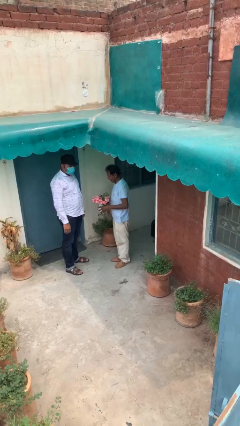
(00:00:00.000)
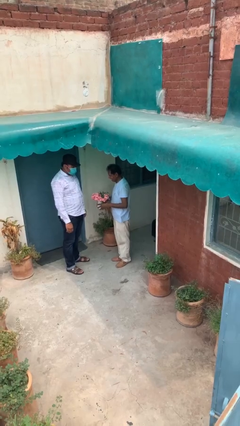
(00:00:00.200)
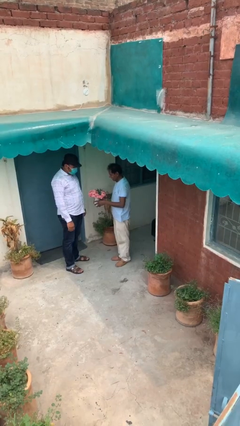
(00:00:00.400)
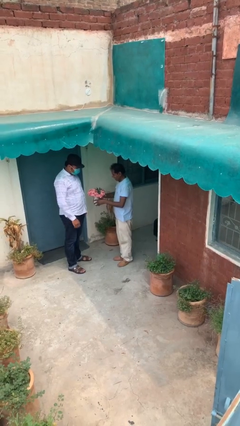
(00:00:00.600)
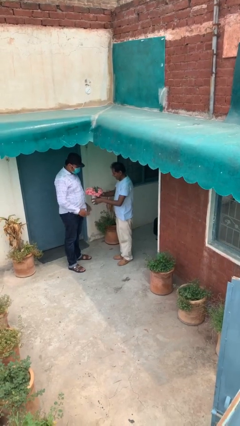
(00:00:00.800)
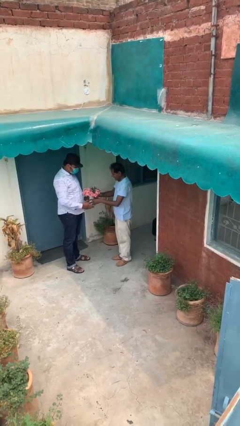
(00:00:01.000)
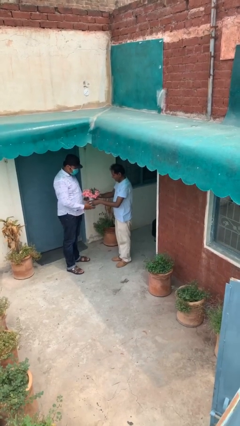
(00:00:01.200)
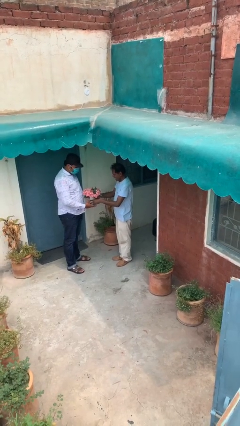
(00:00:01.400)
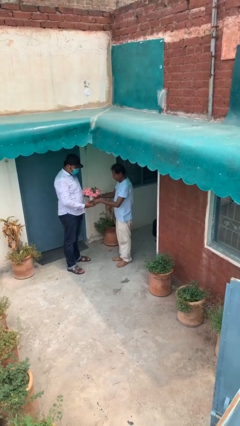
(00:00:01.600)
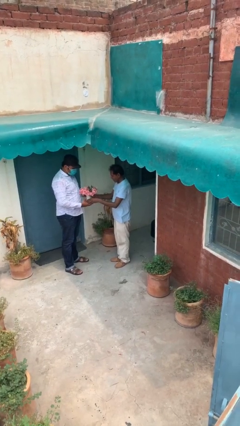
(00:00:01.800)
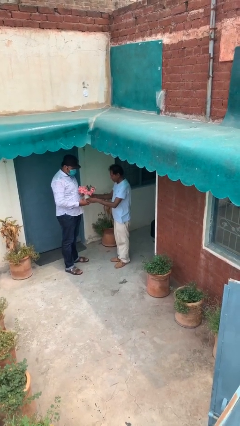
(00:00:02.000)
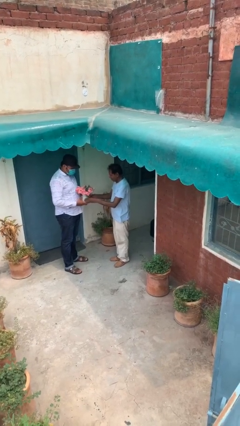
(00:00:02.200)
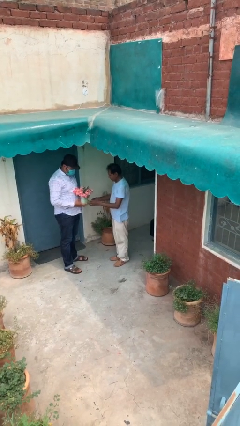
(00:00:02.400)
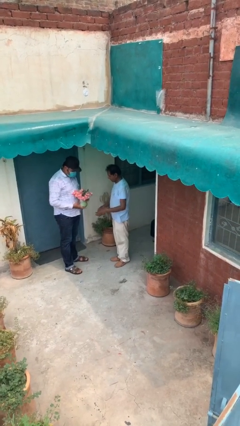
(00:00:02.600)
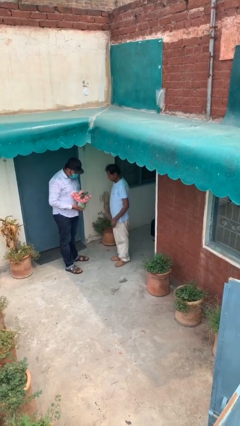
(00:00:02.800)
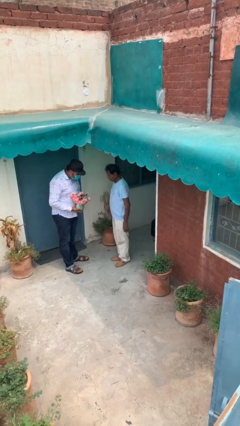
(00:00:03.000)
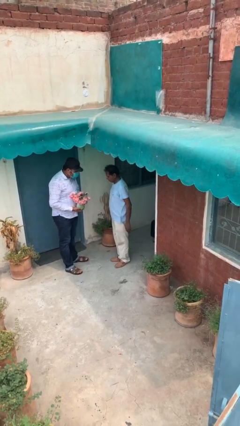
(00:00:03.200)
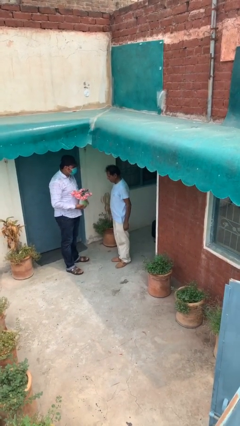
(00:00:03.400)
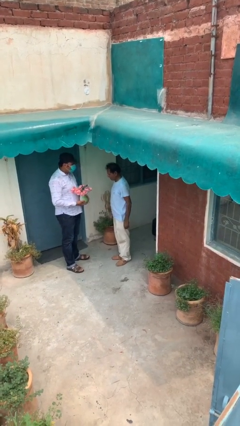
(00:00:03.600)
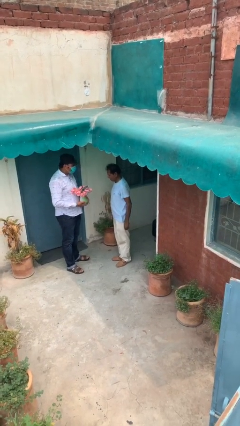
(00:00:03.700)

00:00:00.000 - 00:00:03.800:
person transfers object to person

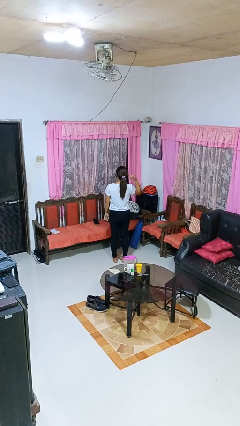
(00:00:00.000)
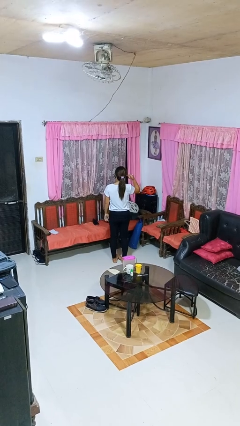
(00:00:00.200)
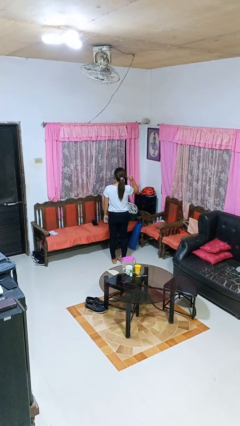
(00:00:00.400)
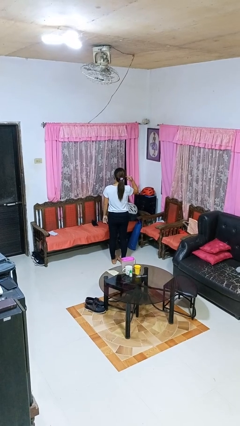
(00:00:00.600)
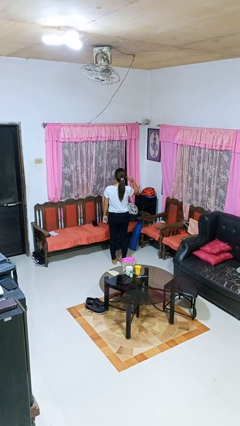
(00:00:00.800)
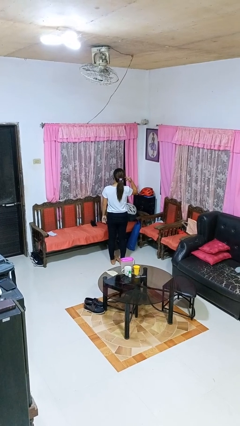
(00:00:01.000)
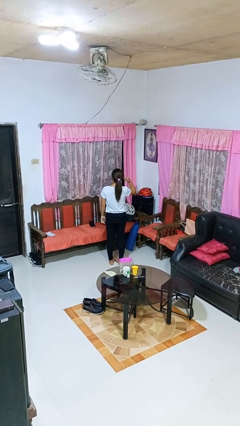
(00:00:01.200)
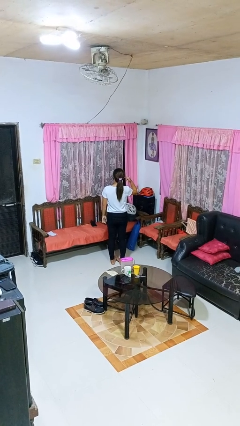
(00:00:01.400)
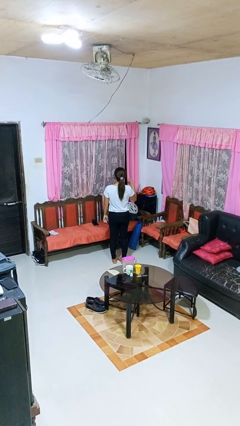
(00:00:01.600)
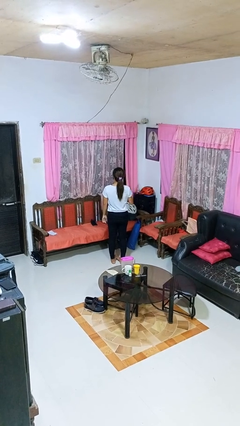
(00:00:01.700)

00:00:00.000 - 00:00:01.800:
person gestures listen closely

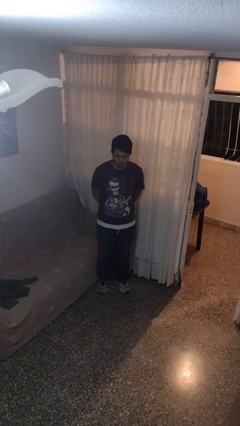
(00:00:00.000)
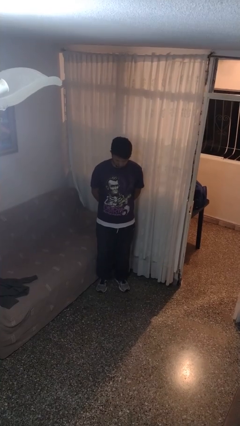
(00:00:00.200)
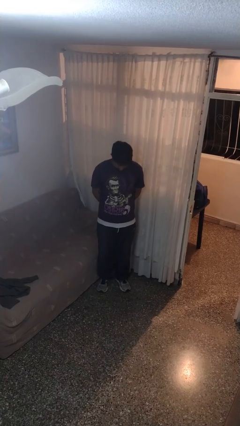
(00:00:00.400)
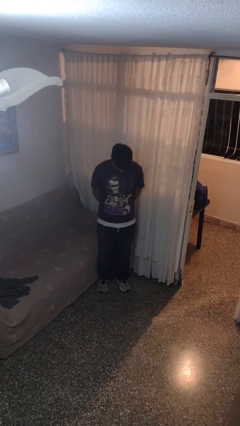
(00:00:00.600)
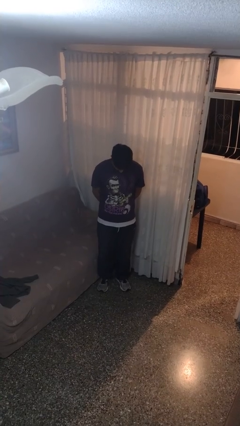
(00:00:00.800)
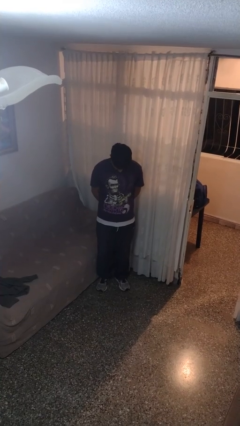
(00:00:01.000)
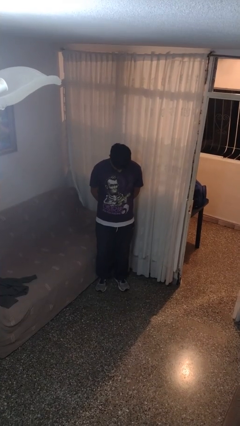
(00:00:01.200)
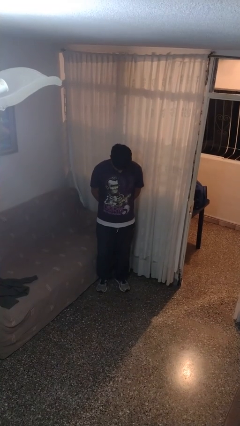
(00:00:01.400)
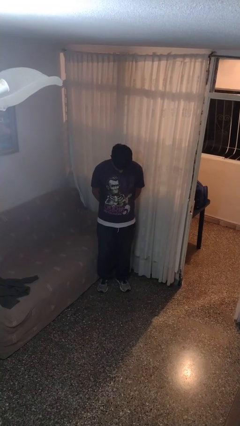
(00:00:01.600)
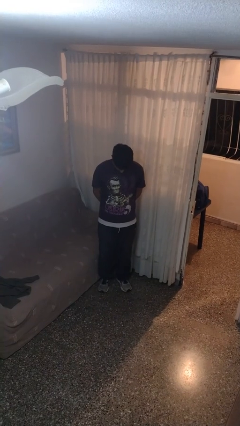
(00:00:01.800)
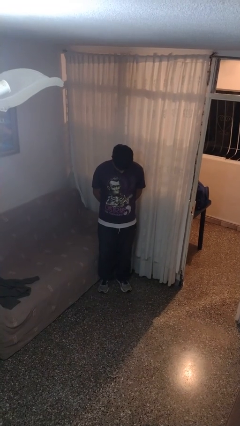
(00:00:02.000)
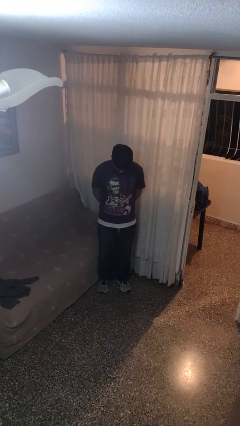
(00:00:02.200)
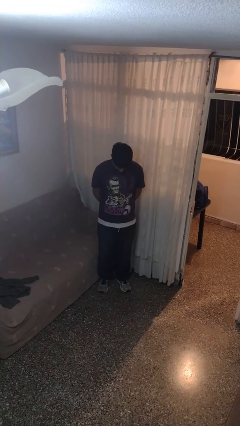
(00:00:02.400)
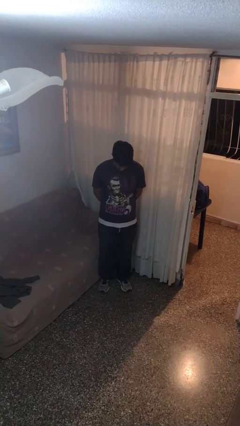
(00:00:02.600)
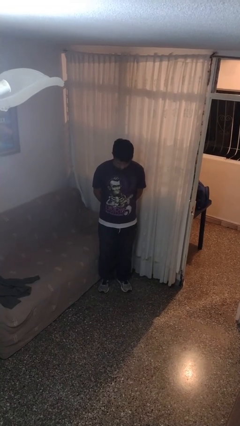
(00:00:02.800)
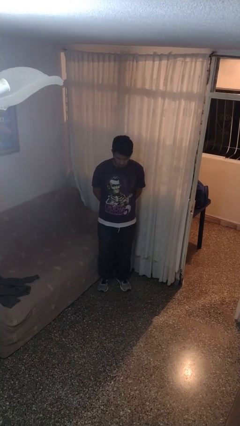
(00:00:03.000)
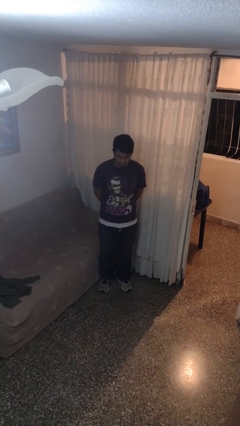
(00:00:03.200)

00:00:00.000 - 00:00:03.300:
person prays

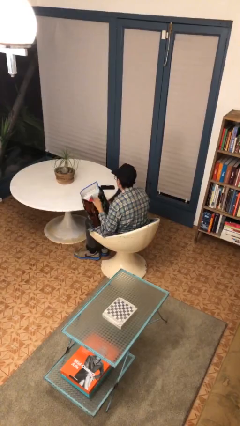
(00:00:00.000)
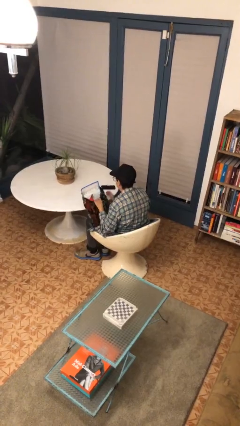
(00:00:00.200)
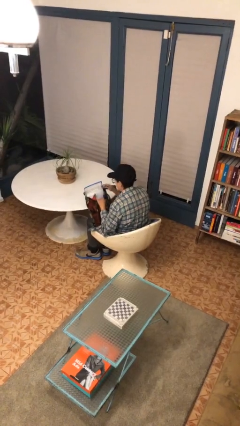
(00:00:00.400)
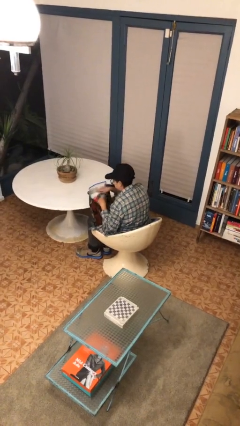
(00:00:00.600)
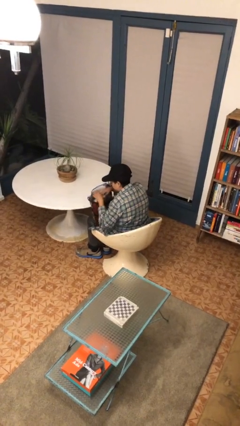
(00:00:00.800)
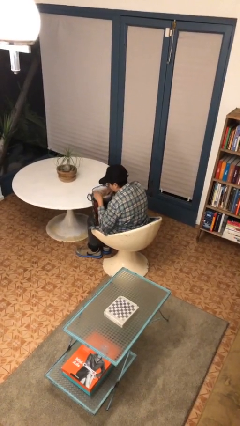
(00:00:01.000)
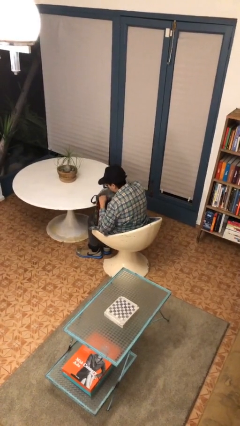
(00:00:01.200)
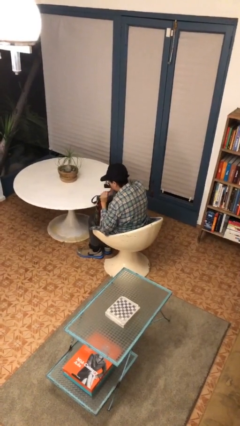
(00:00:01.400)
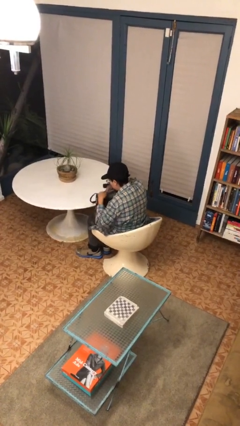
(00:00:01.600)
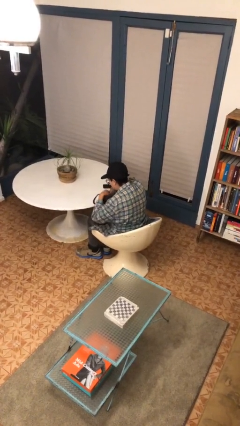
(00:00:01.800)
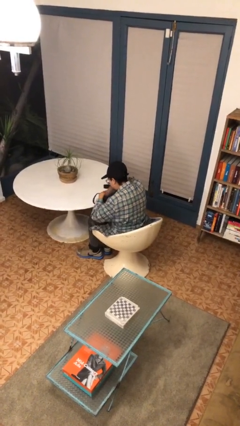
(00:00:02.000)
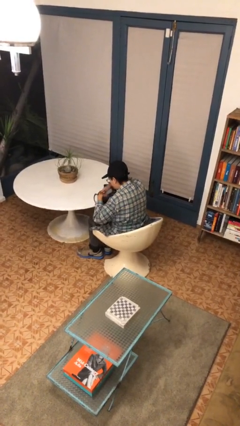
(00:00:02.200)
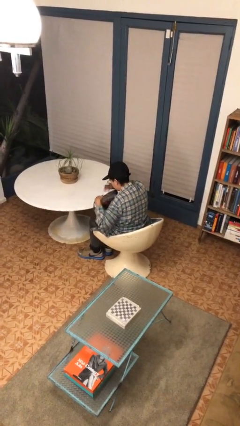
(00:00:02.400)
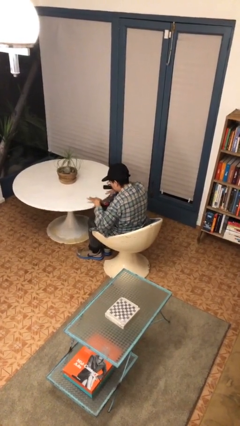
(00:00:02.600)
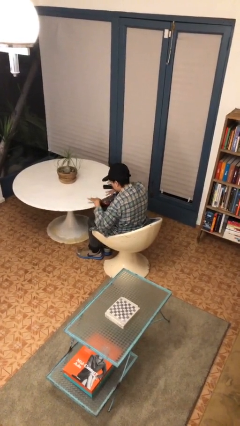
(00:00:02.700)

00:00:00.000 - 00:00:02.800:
person searches in bag

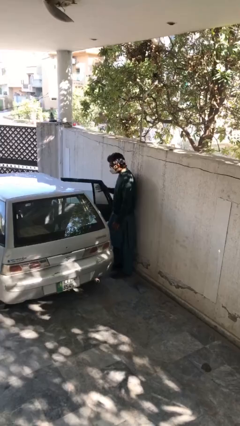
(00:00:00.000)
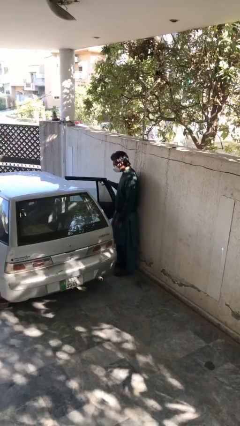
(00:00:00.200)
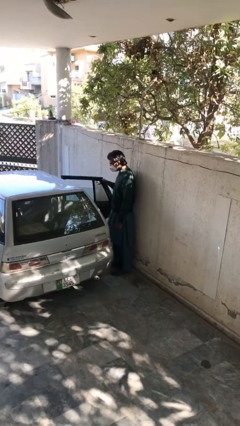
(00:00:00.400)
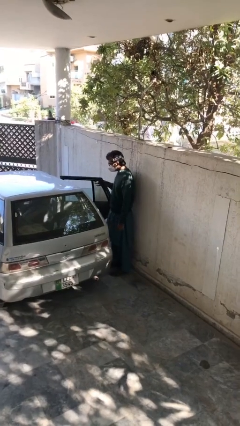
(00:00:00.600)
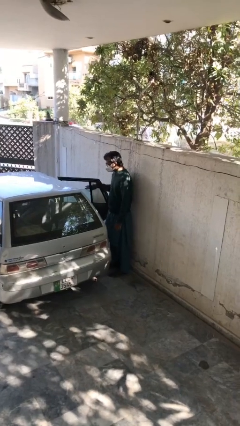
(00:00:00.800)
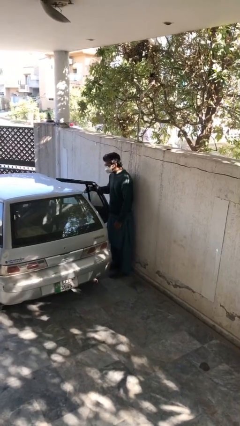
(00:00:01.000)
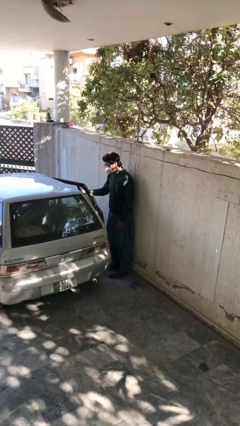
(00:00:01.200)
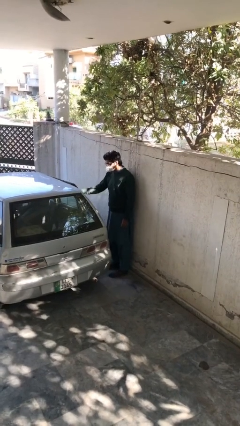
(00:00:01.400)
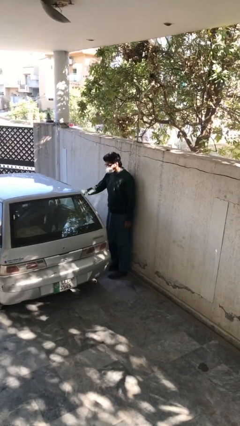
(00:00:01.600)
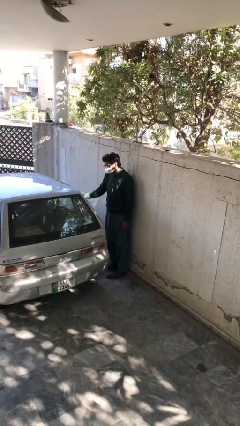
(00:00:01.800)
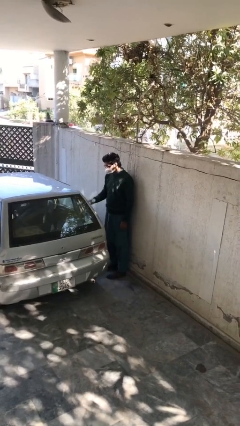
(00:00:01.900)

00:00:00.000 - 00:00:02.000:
person closes car door

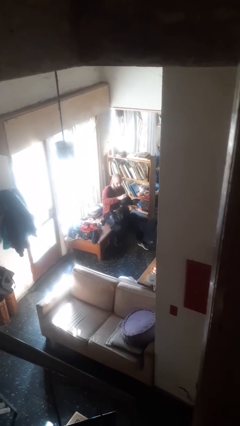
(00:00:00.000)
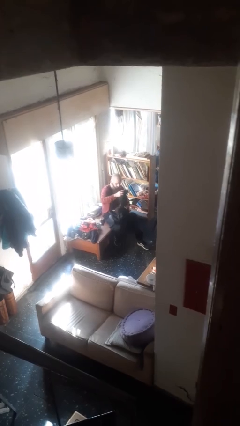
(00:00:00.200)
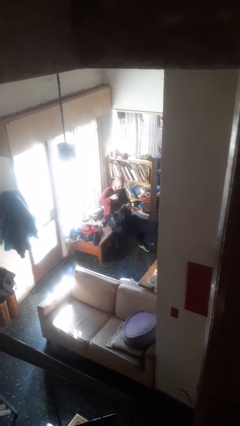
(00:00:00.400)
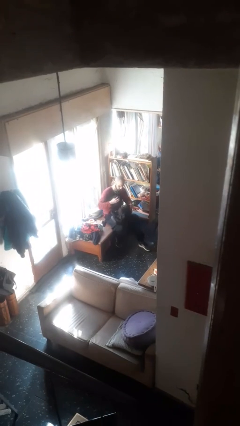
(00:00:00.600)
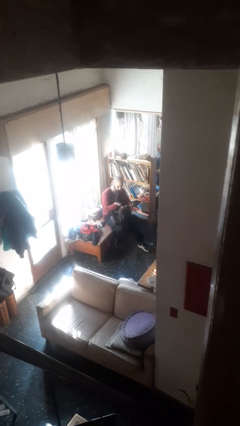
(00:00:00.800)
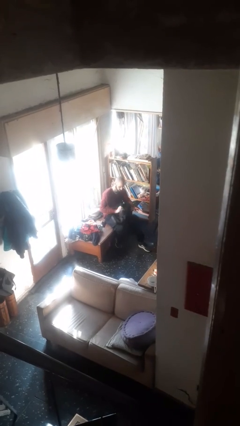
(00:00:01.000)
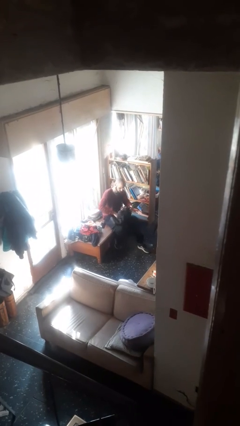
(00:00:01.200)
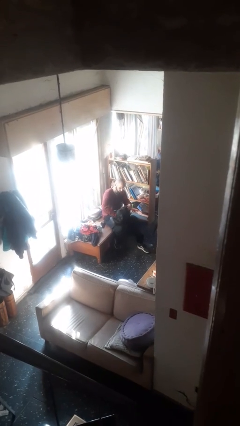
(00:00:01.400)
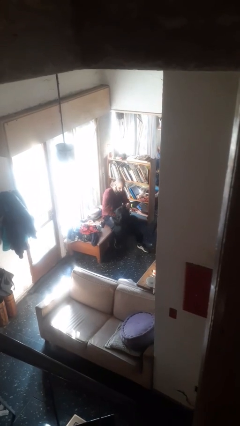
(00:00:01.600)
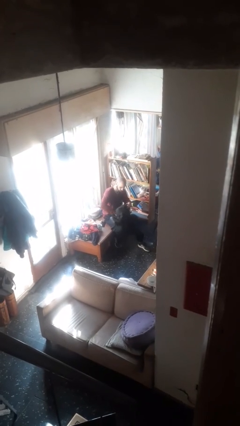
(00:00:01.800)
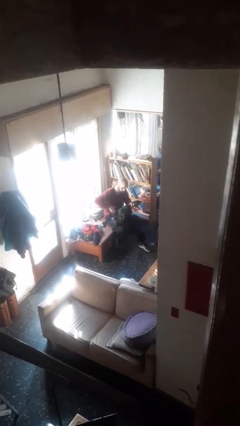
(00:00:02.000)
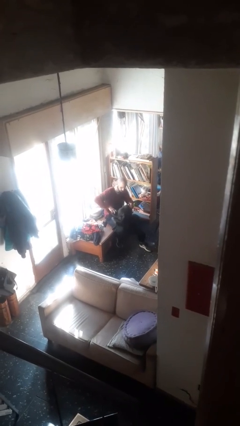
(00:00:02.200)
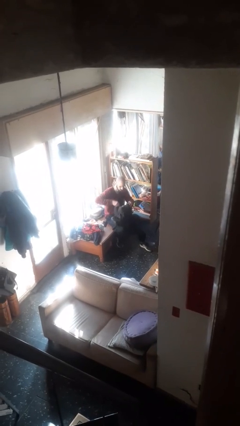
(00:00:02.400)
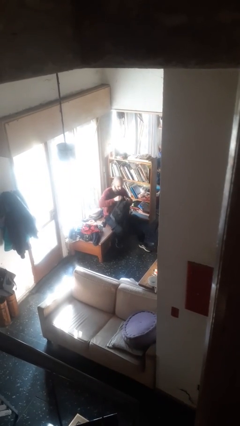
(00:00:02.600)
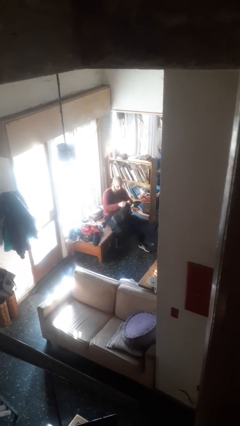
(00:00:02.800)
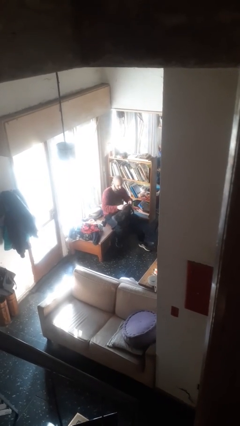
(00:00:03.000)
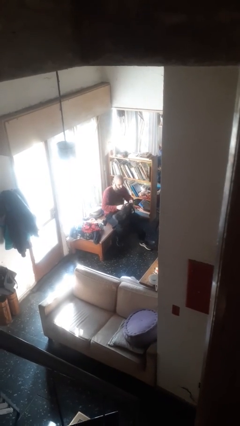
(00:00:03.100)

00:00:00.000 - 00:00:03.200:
person puts object into backpack

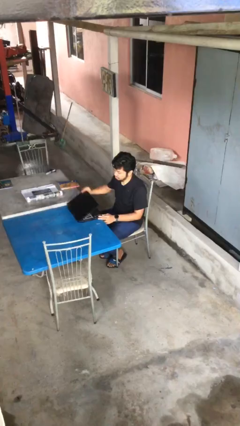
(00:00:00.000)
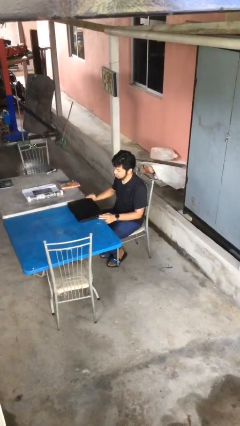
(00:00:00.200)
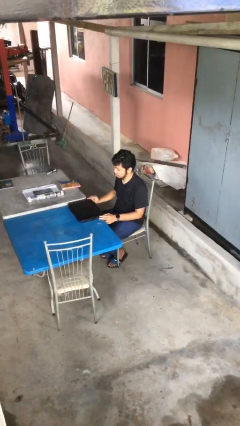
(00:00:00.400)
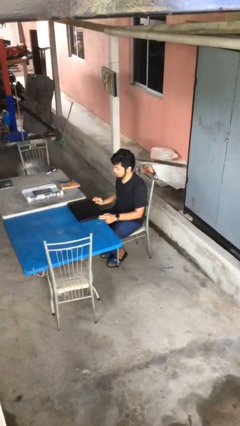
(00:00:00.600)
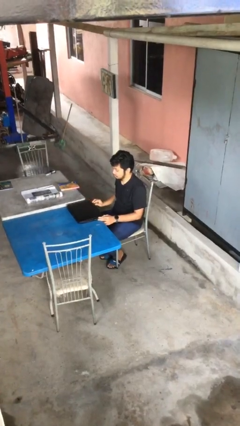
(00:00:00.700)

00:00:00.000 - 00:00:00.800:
person closes laptop
